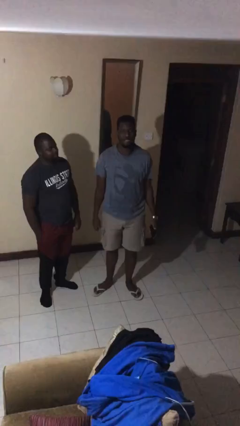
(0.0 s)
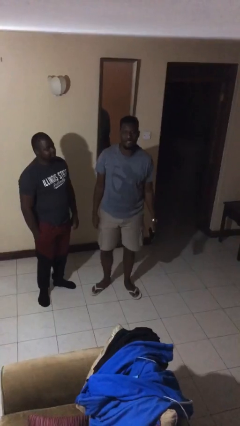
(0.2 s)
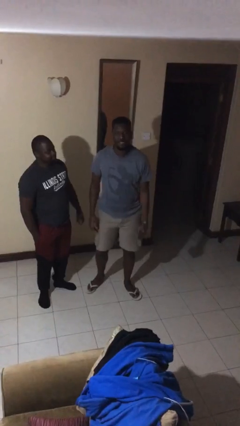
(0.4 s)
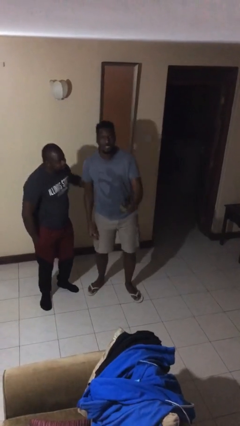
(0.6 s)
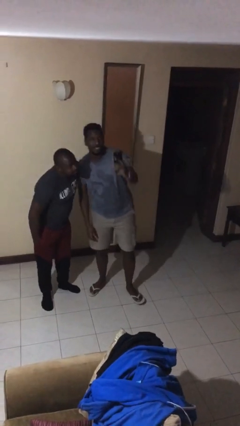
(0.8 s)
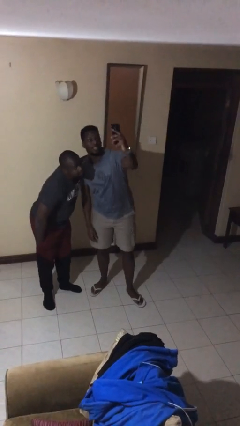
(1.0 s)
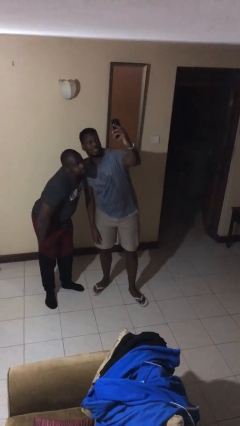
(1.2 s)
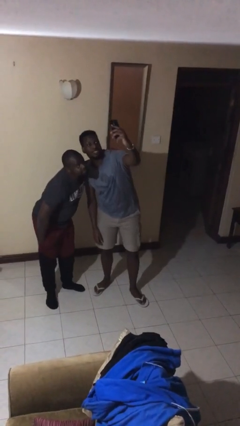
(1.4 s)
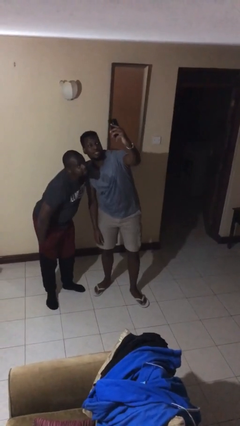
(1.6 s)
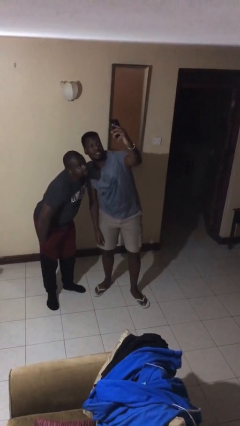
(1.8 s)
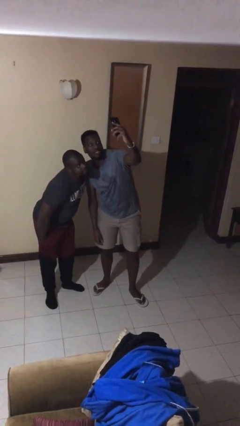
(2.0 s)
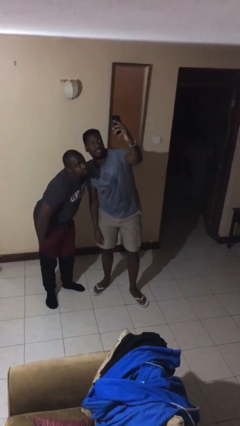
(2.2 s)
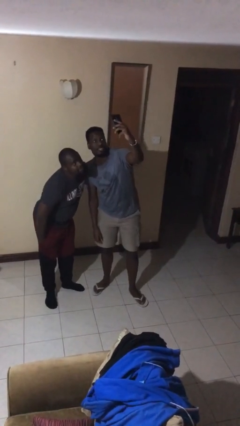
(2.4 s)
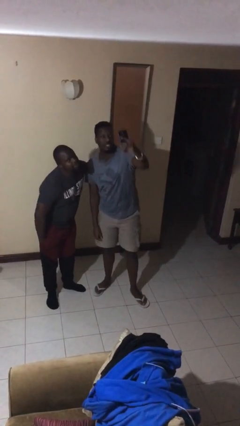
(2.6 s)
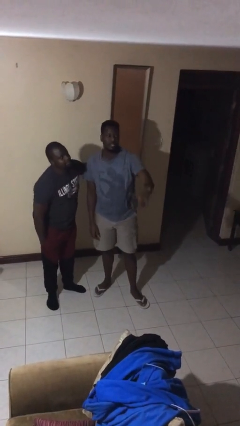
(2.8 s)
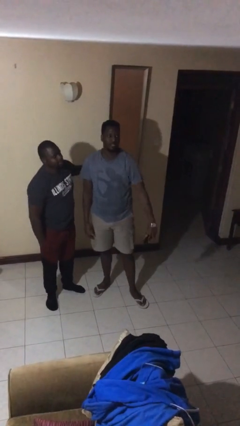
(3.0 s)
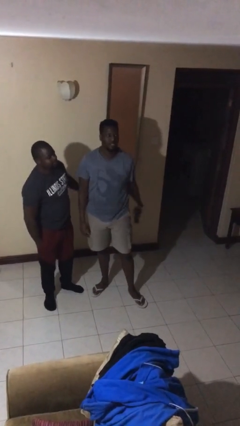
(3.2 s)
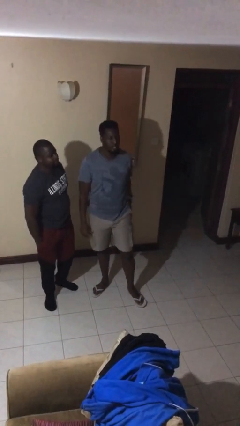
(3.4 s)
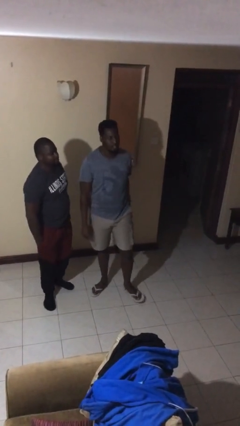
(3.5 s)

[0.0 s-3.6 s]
person takes selfie with person

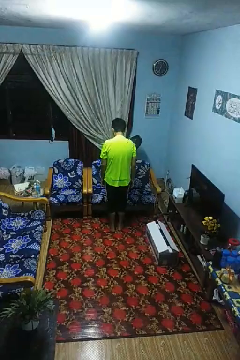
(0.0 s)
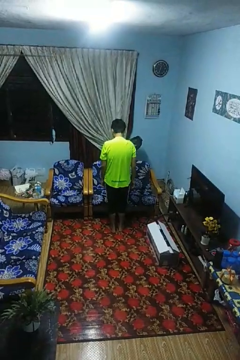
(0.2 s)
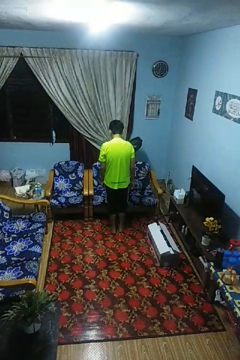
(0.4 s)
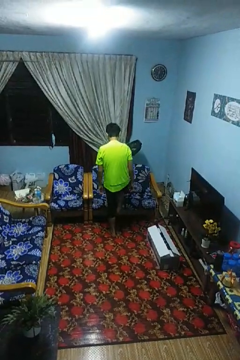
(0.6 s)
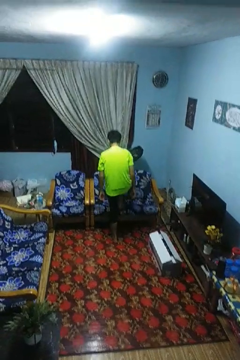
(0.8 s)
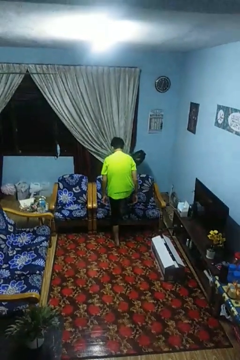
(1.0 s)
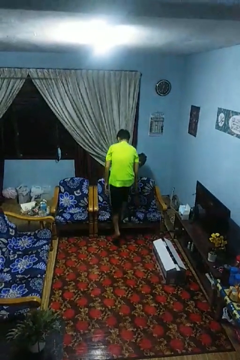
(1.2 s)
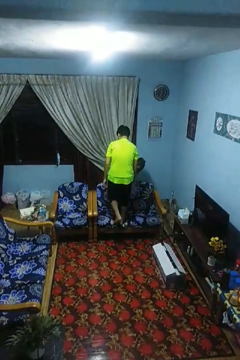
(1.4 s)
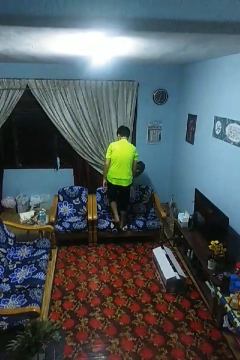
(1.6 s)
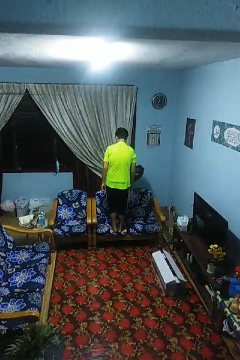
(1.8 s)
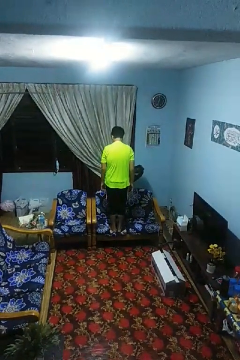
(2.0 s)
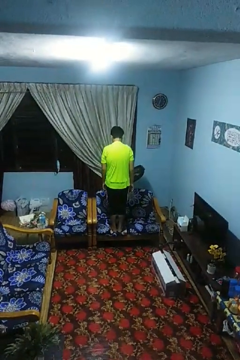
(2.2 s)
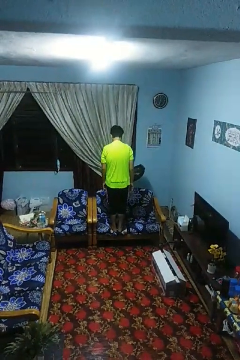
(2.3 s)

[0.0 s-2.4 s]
person climbs on couch

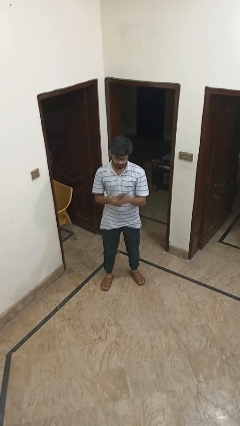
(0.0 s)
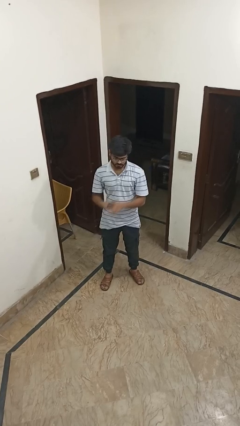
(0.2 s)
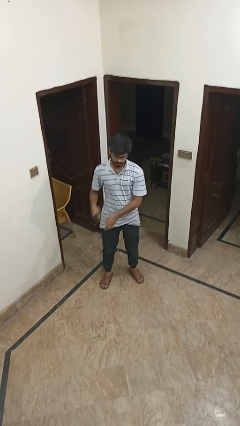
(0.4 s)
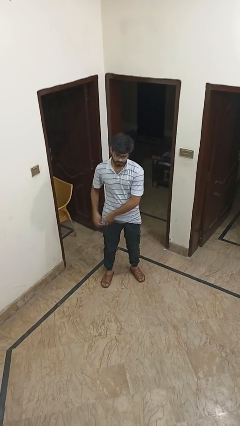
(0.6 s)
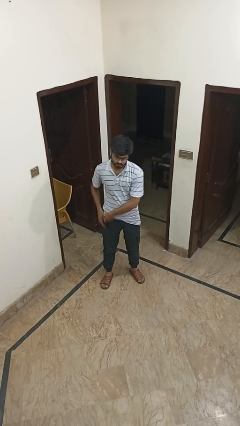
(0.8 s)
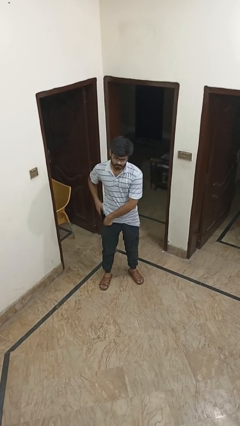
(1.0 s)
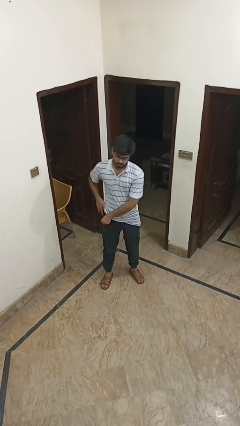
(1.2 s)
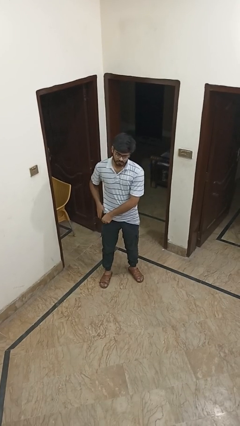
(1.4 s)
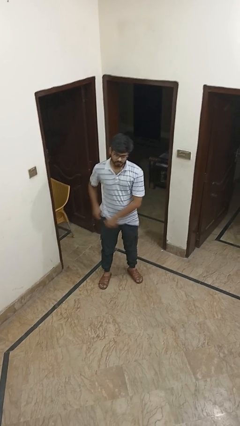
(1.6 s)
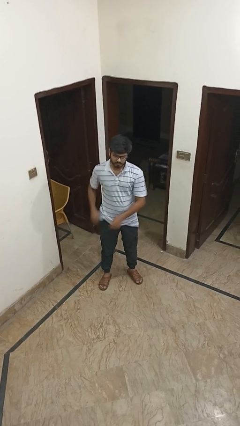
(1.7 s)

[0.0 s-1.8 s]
person puts phone into pocket

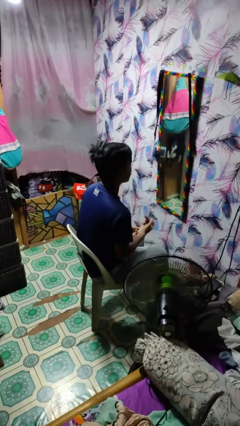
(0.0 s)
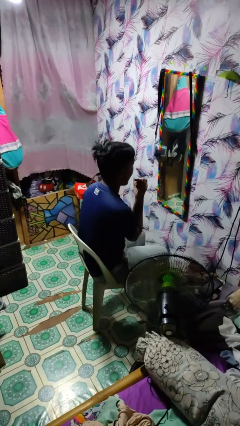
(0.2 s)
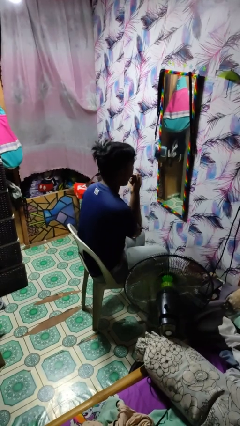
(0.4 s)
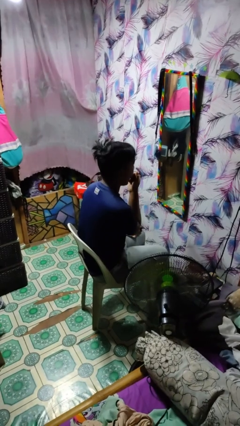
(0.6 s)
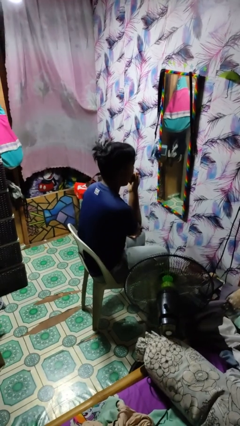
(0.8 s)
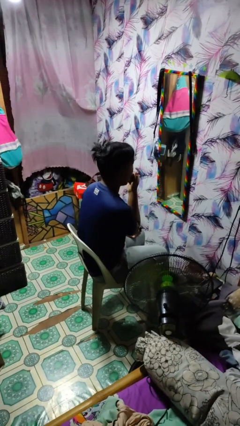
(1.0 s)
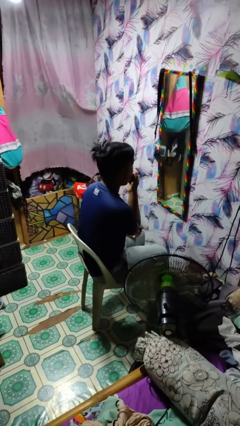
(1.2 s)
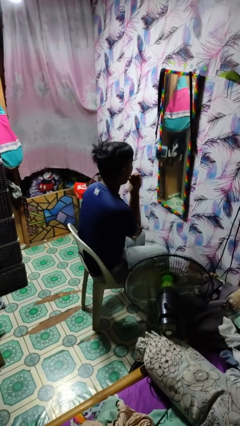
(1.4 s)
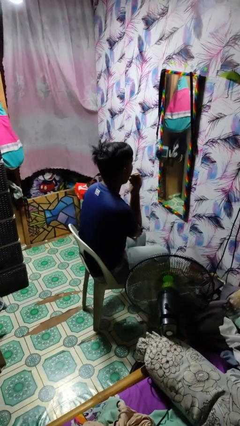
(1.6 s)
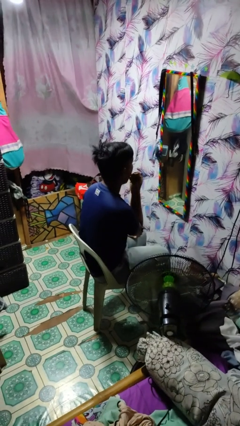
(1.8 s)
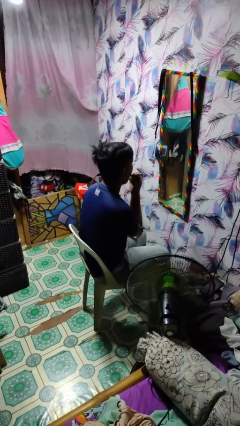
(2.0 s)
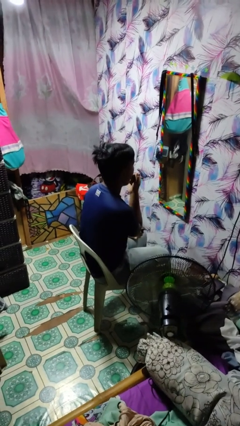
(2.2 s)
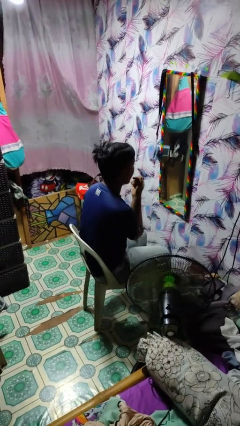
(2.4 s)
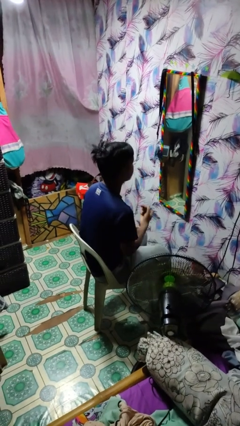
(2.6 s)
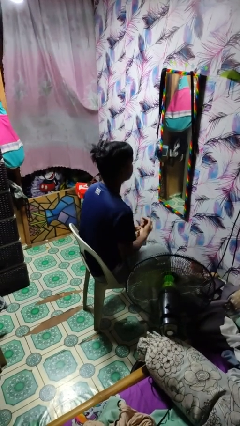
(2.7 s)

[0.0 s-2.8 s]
person applies lip makeup

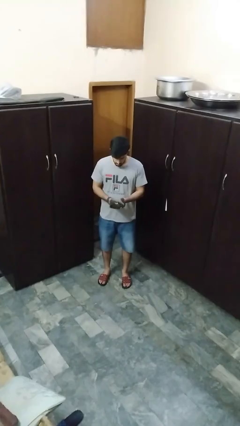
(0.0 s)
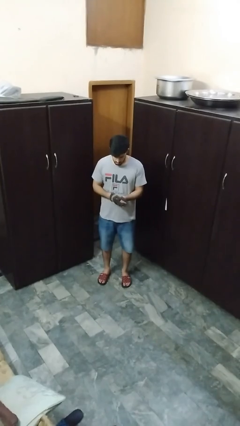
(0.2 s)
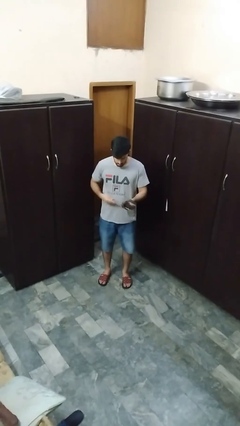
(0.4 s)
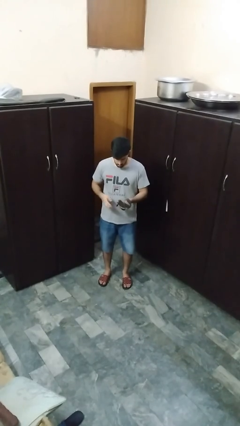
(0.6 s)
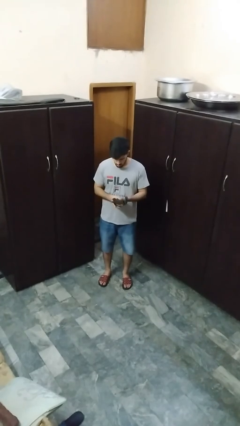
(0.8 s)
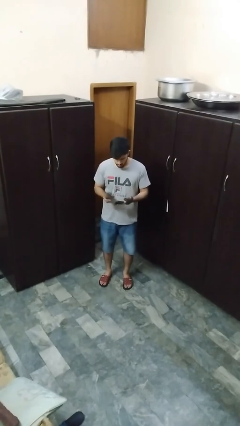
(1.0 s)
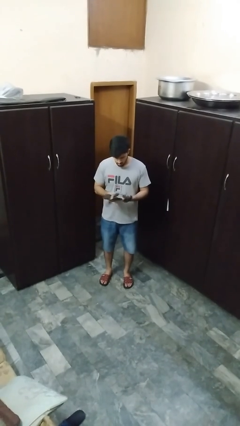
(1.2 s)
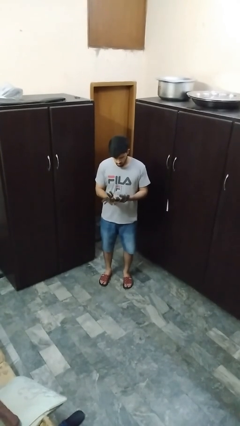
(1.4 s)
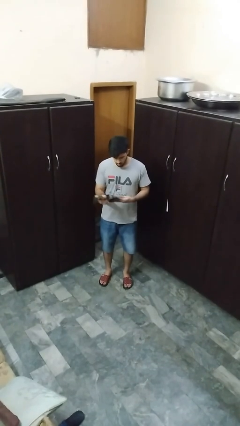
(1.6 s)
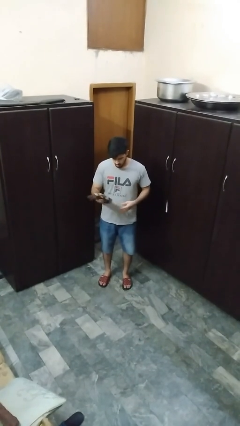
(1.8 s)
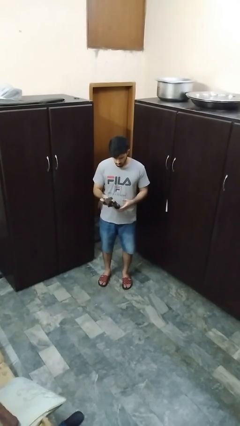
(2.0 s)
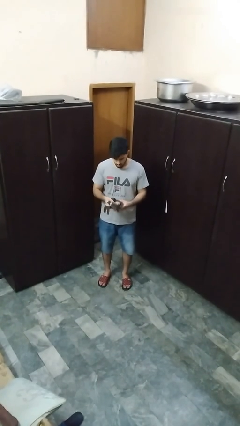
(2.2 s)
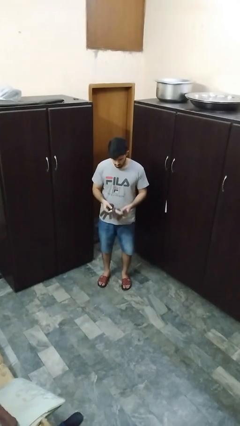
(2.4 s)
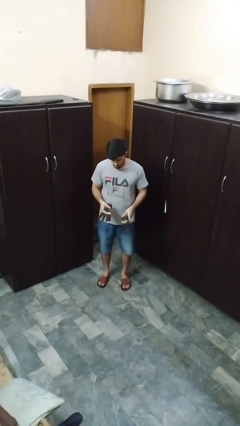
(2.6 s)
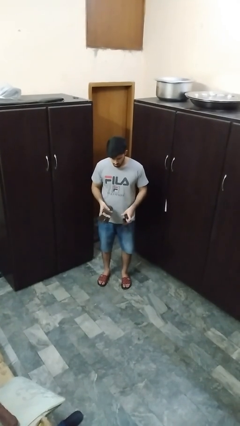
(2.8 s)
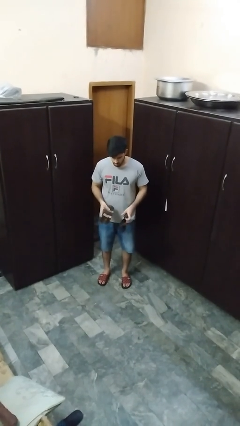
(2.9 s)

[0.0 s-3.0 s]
person takes off gloves

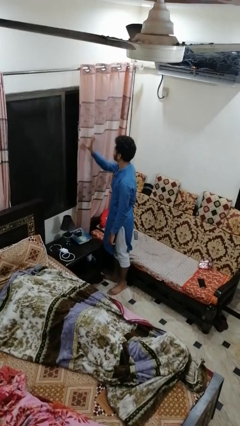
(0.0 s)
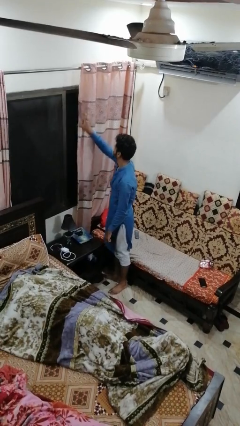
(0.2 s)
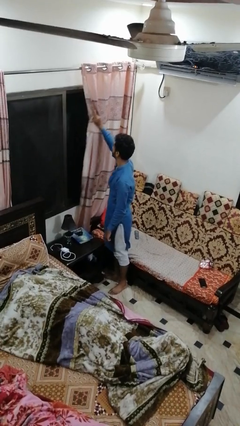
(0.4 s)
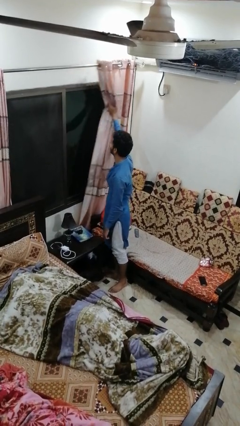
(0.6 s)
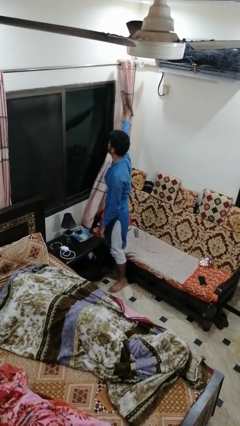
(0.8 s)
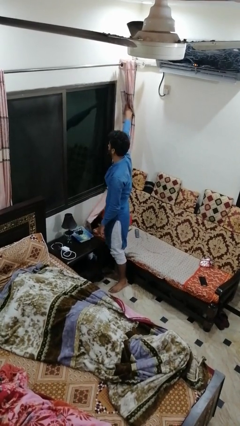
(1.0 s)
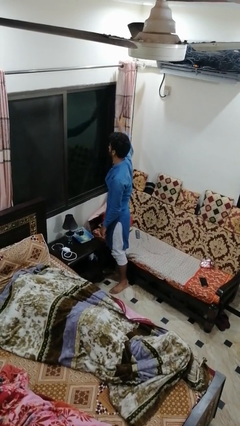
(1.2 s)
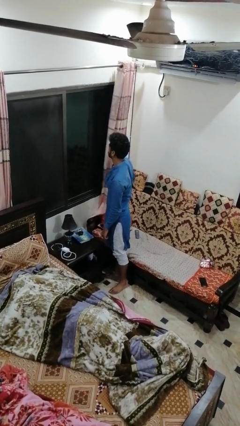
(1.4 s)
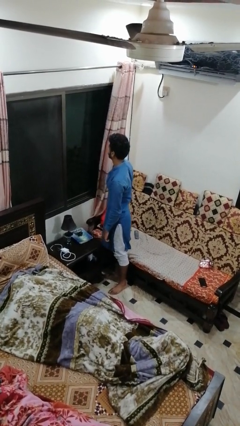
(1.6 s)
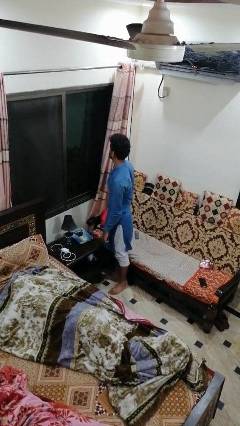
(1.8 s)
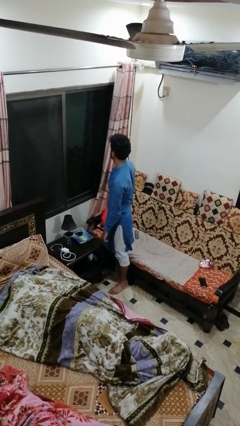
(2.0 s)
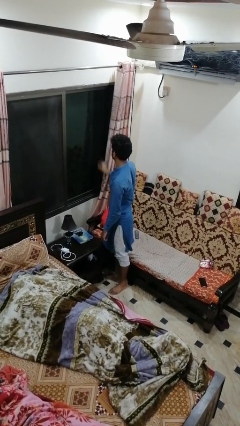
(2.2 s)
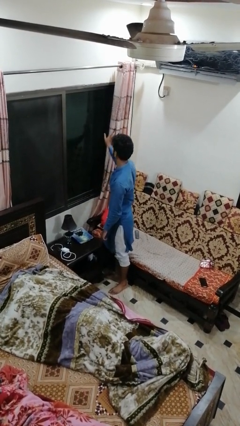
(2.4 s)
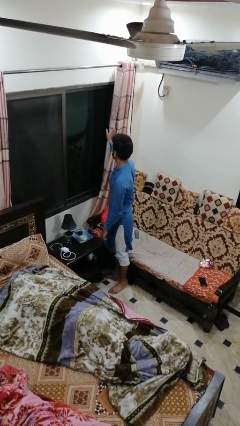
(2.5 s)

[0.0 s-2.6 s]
person opens curtains

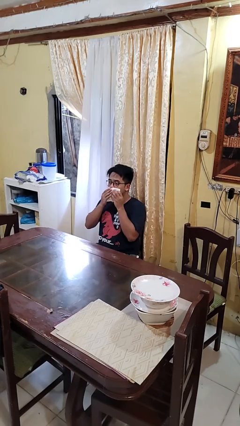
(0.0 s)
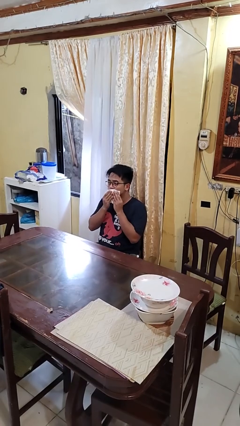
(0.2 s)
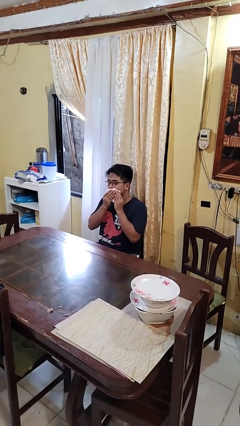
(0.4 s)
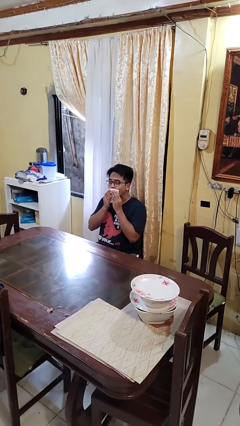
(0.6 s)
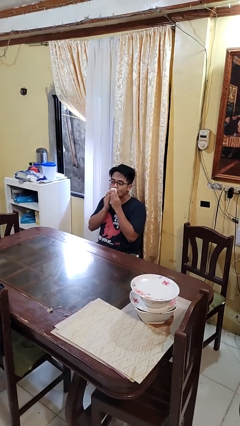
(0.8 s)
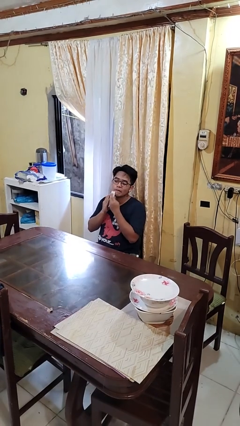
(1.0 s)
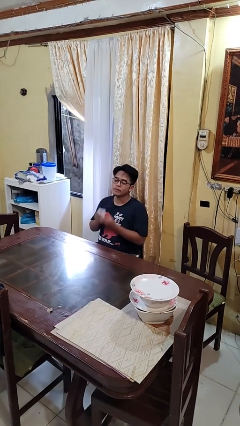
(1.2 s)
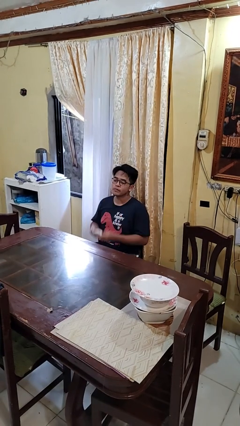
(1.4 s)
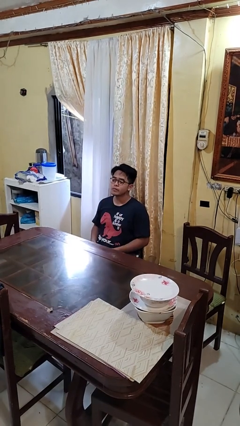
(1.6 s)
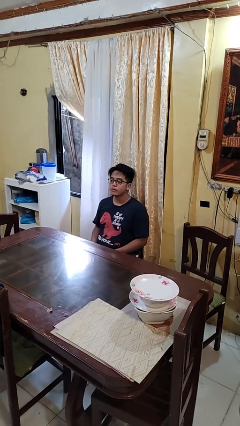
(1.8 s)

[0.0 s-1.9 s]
person wipes mouth with napkin
